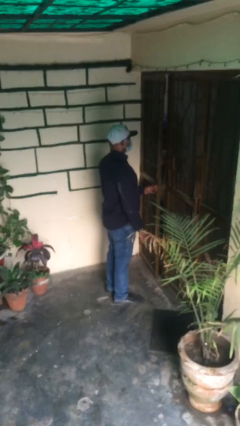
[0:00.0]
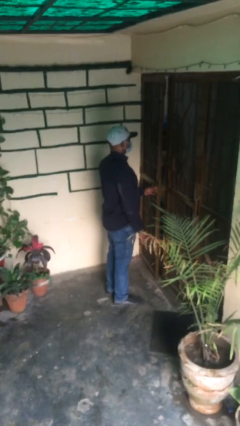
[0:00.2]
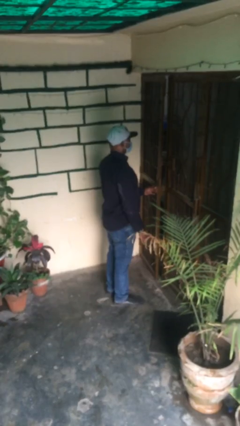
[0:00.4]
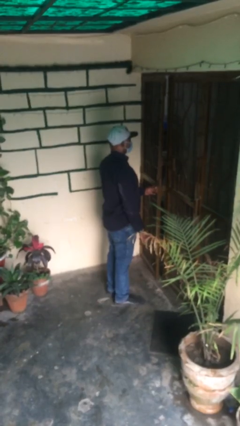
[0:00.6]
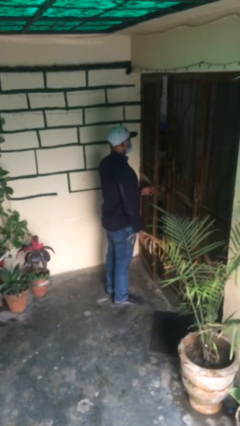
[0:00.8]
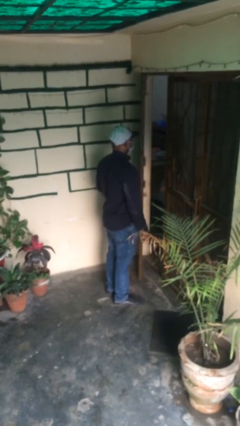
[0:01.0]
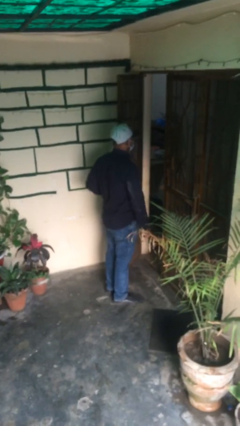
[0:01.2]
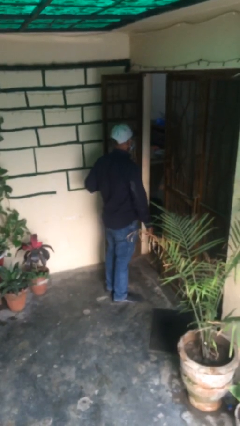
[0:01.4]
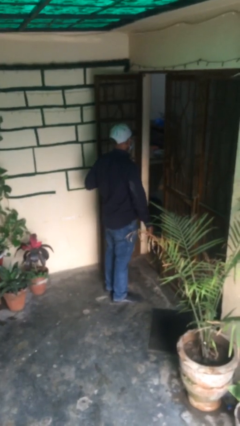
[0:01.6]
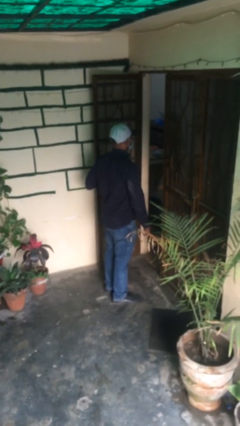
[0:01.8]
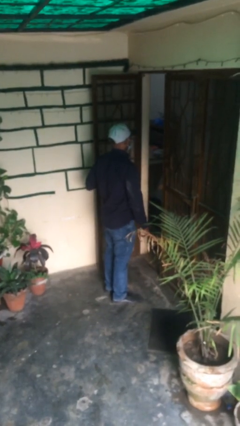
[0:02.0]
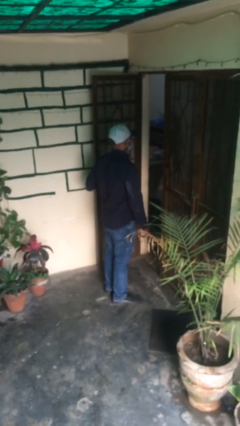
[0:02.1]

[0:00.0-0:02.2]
person opens facility door

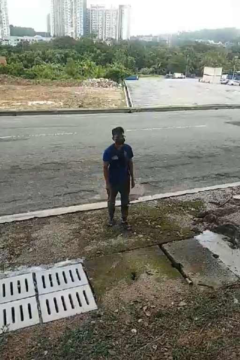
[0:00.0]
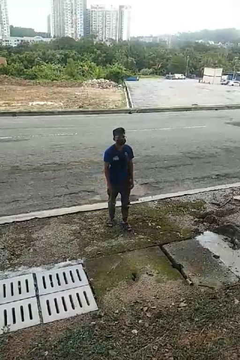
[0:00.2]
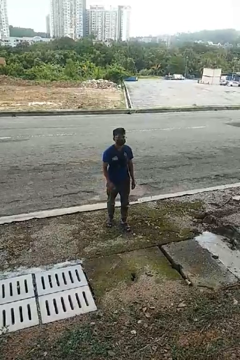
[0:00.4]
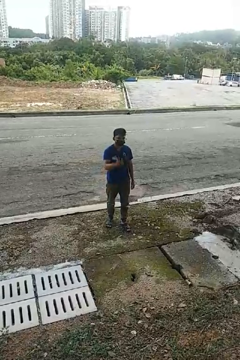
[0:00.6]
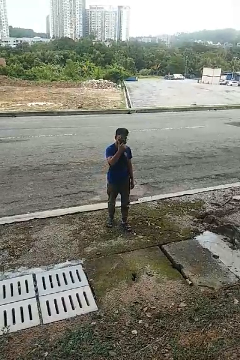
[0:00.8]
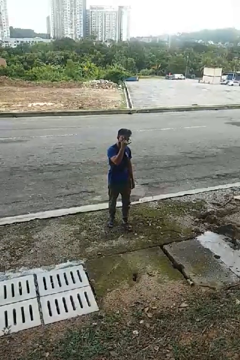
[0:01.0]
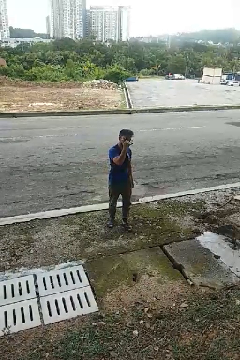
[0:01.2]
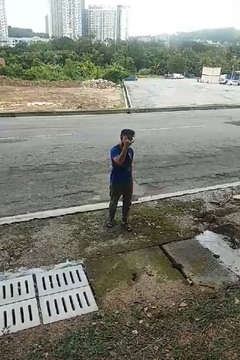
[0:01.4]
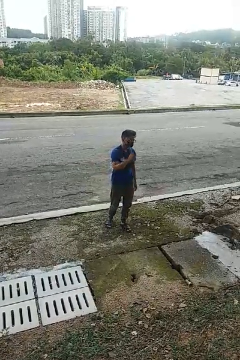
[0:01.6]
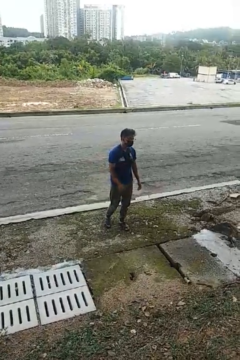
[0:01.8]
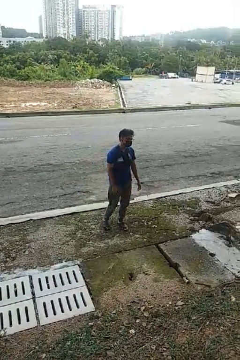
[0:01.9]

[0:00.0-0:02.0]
person gestures hang loose

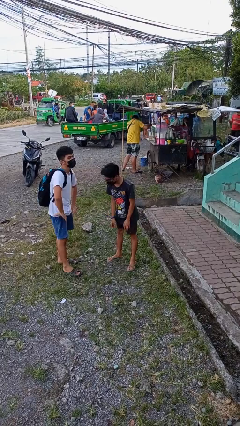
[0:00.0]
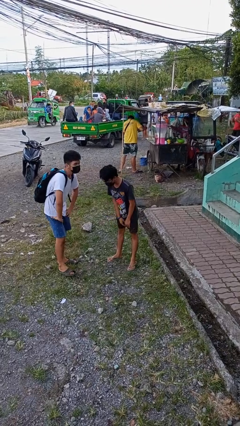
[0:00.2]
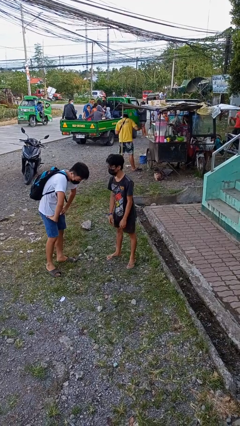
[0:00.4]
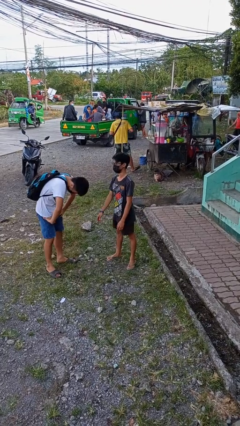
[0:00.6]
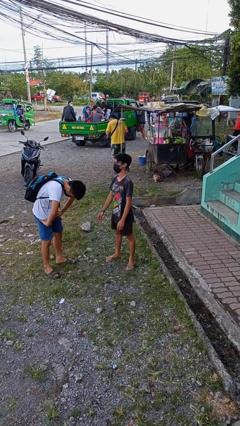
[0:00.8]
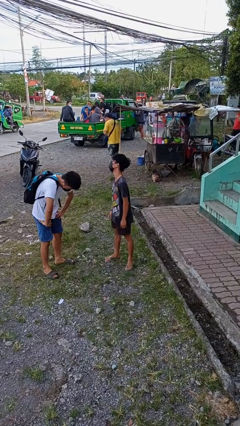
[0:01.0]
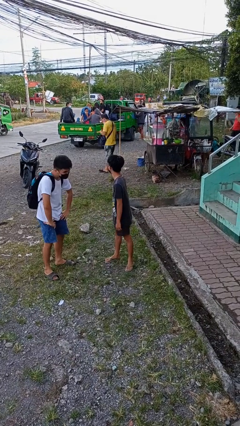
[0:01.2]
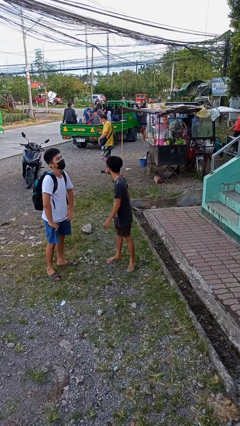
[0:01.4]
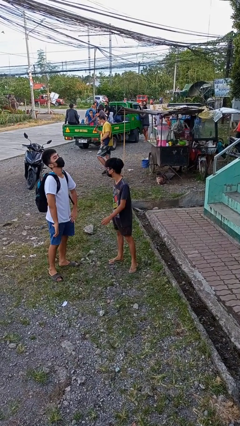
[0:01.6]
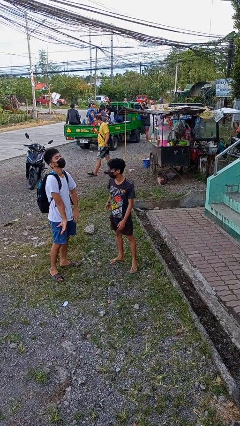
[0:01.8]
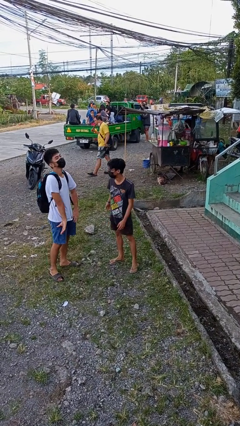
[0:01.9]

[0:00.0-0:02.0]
person laughs with person

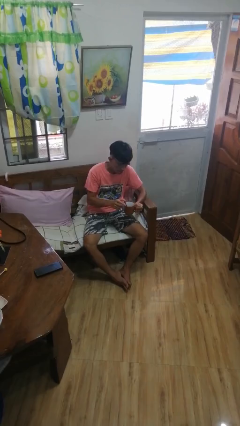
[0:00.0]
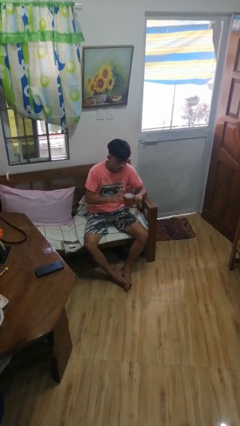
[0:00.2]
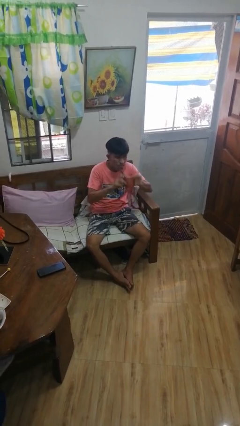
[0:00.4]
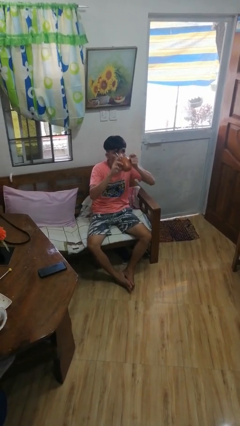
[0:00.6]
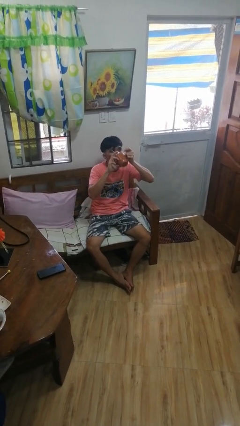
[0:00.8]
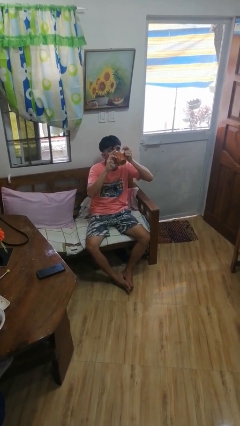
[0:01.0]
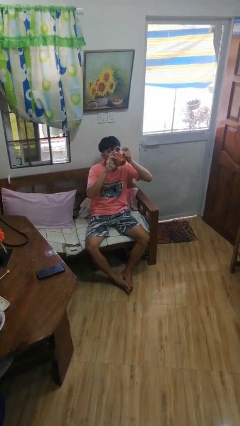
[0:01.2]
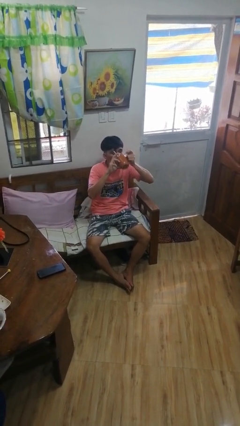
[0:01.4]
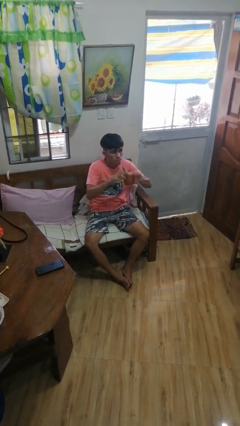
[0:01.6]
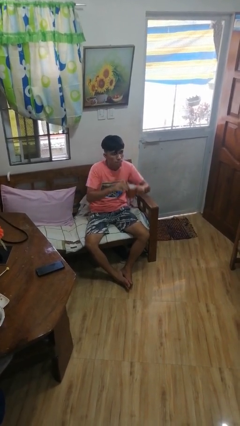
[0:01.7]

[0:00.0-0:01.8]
person drinks from mug

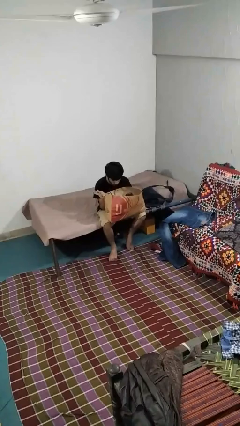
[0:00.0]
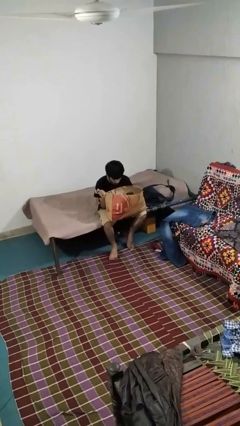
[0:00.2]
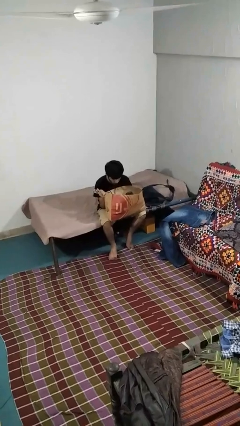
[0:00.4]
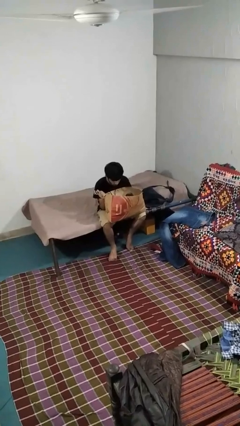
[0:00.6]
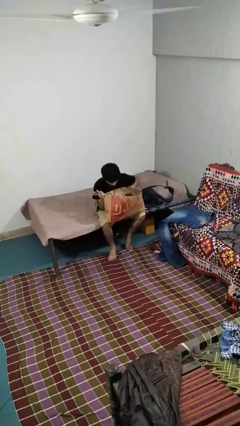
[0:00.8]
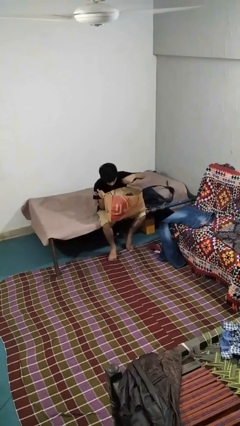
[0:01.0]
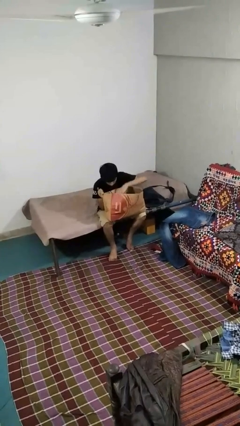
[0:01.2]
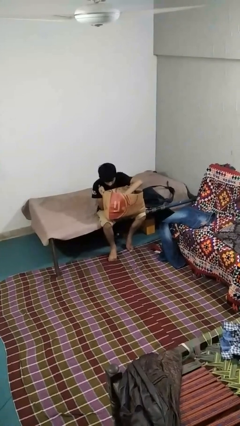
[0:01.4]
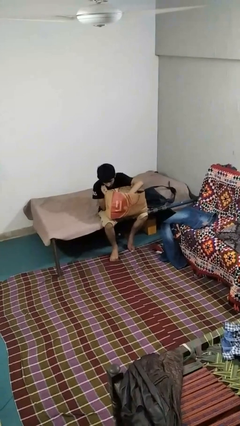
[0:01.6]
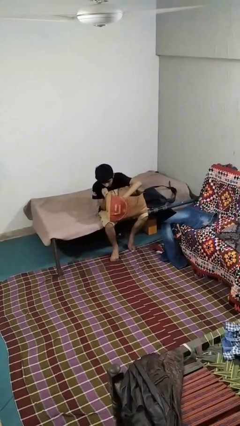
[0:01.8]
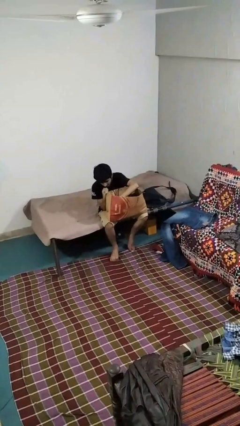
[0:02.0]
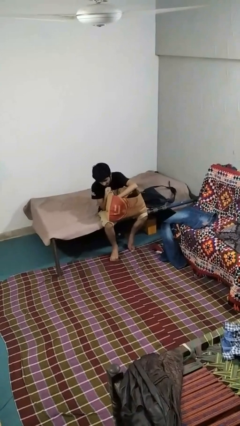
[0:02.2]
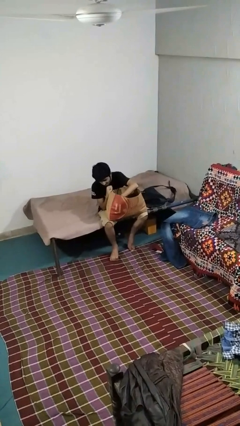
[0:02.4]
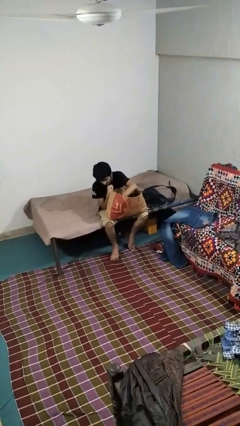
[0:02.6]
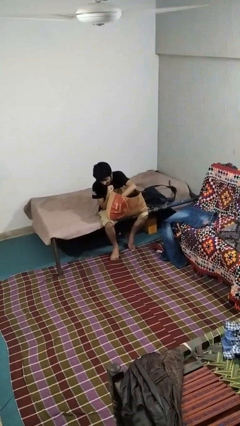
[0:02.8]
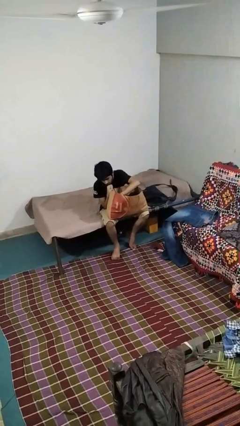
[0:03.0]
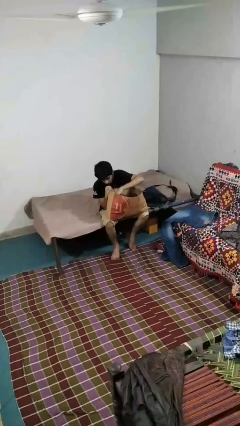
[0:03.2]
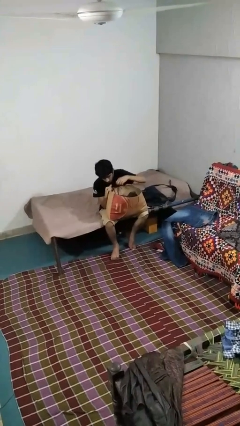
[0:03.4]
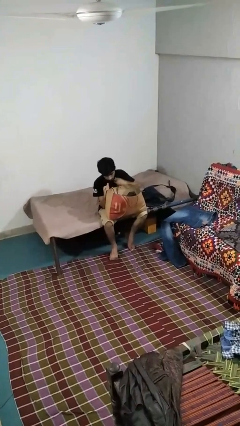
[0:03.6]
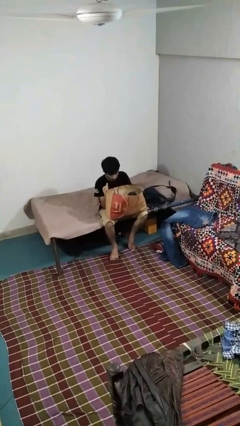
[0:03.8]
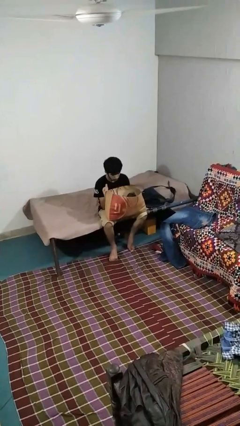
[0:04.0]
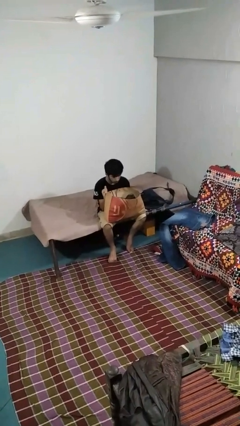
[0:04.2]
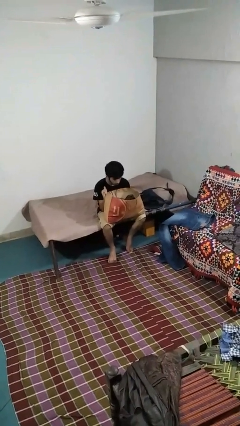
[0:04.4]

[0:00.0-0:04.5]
person searches in bag

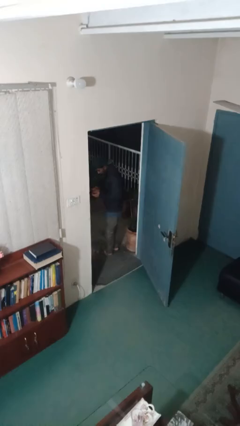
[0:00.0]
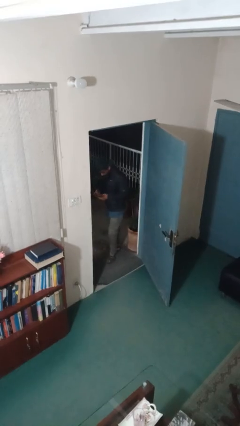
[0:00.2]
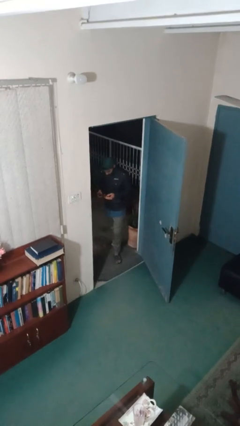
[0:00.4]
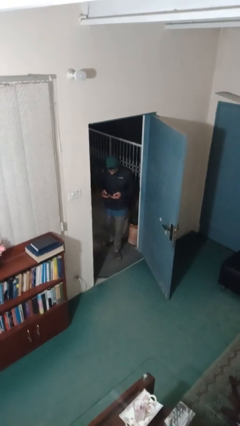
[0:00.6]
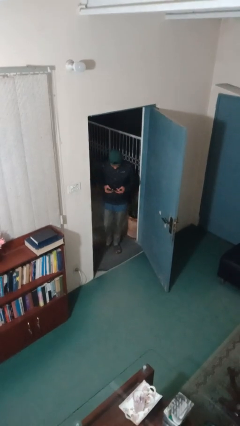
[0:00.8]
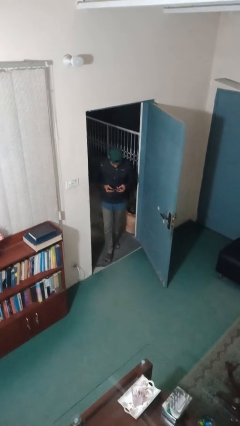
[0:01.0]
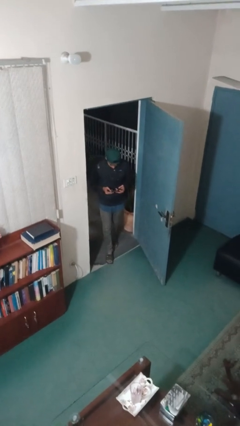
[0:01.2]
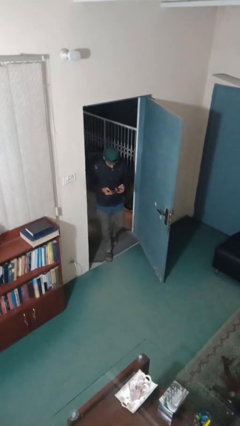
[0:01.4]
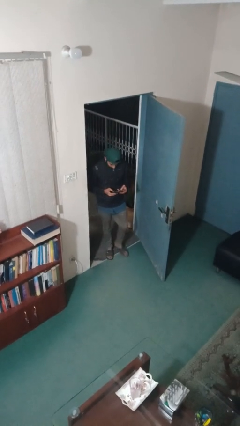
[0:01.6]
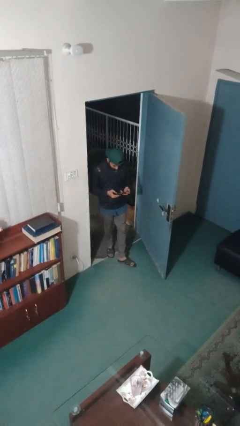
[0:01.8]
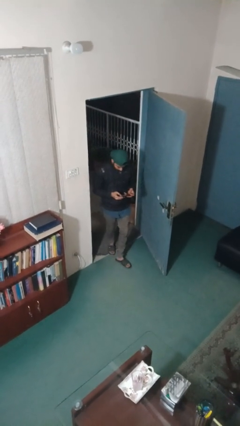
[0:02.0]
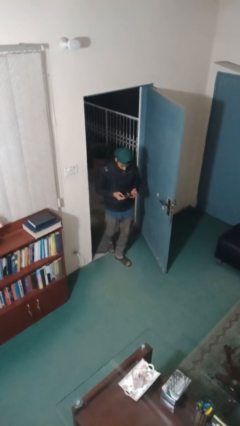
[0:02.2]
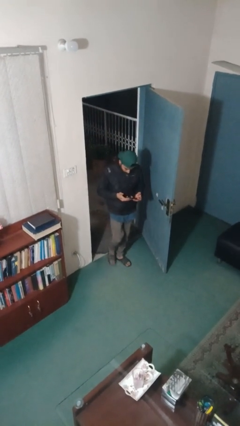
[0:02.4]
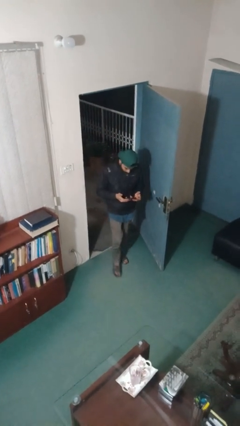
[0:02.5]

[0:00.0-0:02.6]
person enters scene through structure

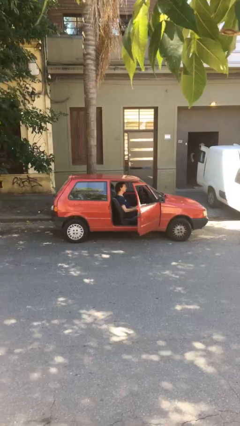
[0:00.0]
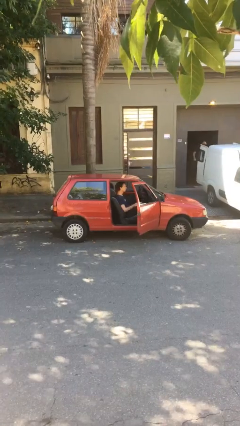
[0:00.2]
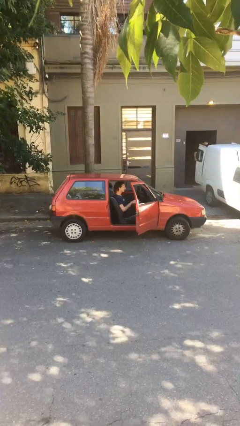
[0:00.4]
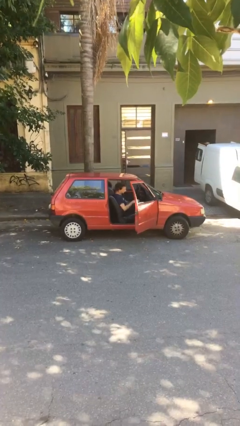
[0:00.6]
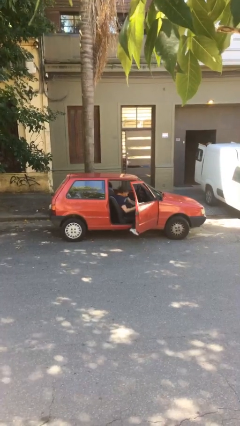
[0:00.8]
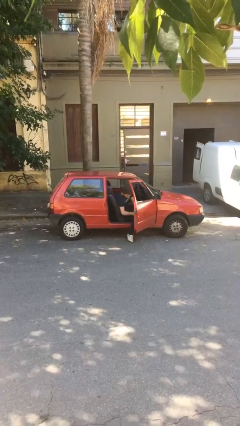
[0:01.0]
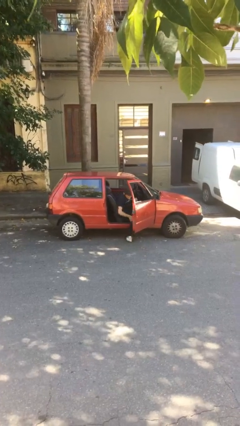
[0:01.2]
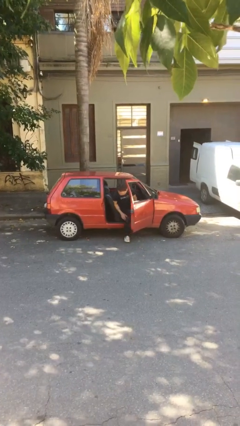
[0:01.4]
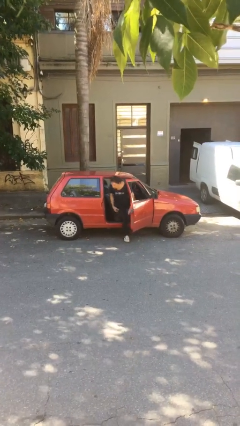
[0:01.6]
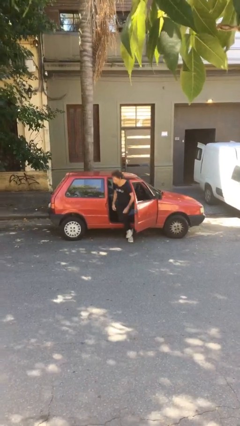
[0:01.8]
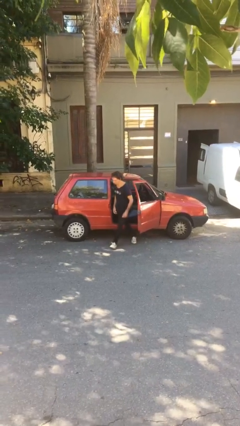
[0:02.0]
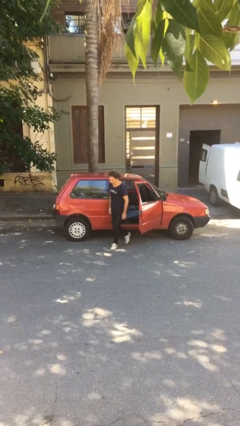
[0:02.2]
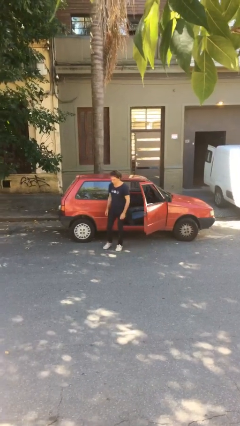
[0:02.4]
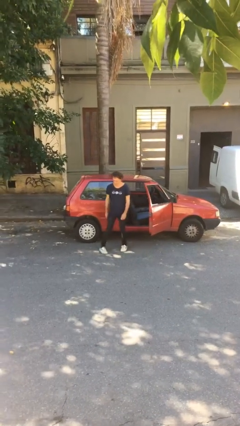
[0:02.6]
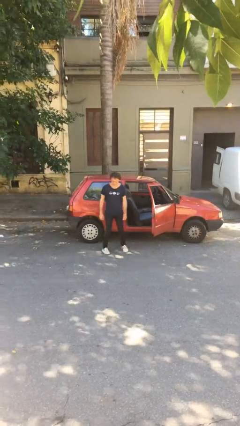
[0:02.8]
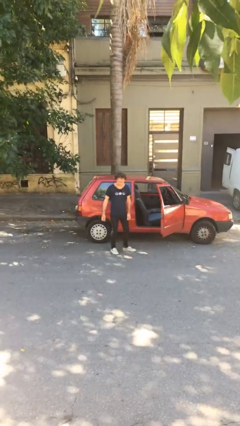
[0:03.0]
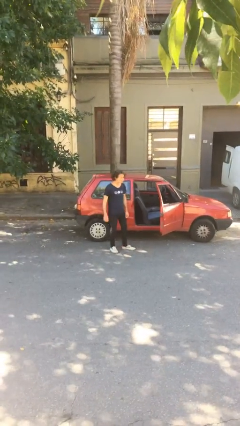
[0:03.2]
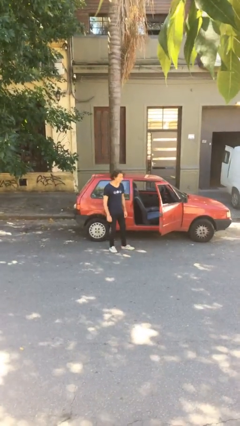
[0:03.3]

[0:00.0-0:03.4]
person exits car
